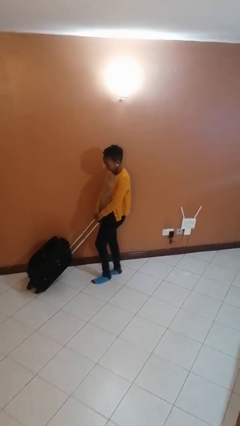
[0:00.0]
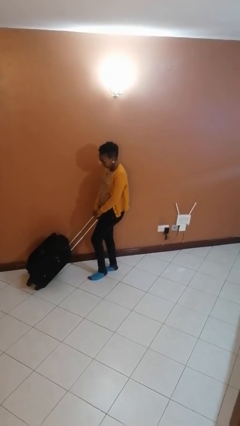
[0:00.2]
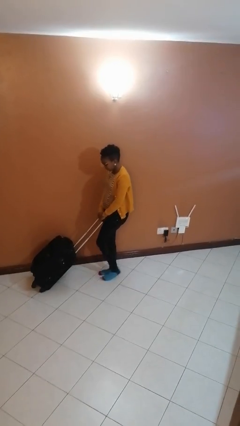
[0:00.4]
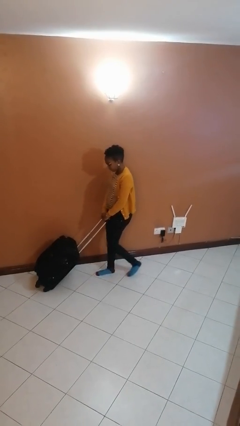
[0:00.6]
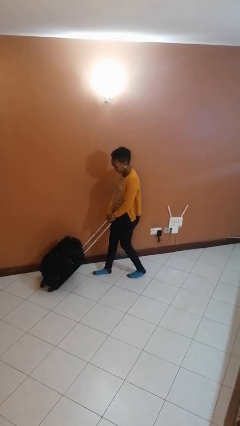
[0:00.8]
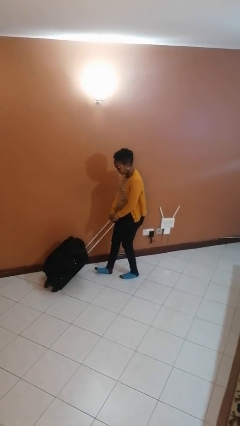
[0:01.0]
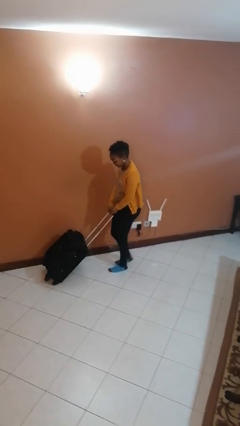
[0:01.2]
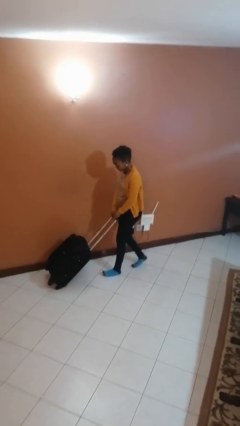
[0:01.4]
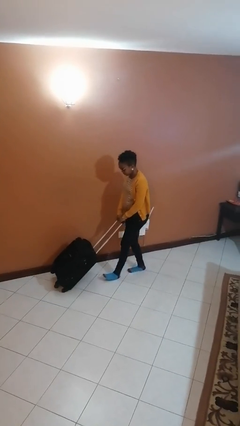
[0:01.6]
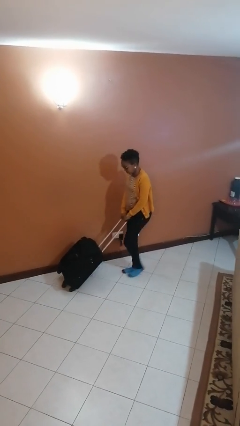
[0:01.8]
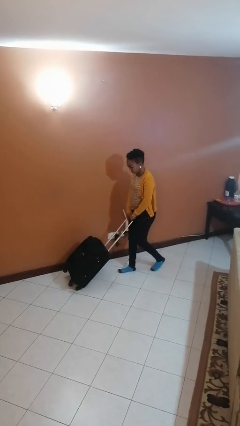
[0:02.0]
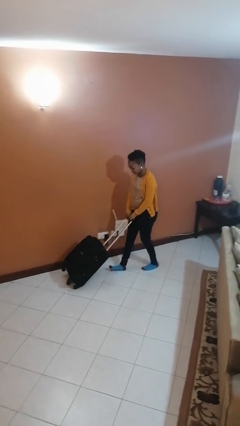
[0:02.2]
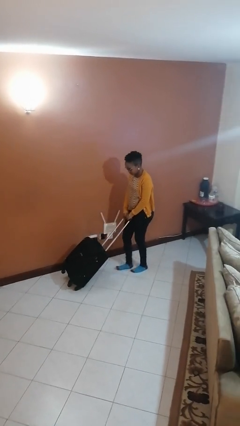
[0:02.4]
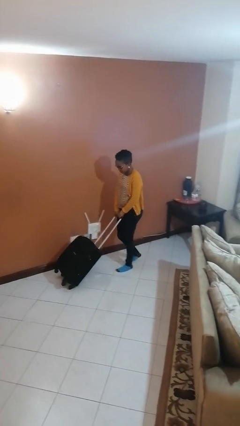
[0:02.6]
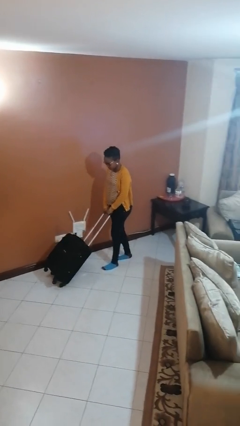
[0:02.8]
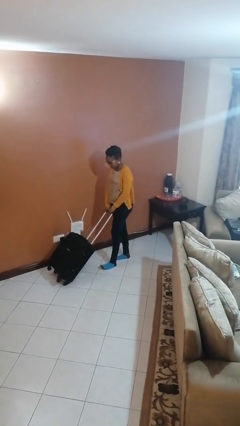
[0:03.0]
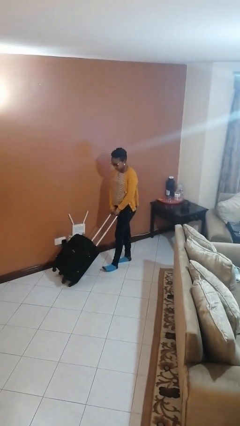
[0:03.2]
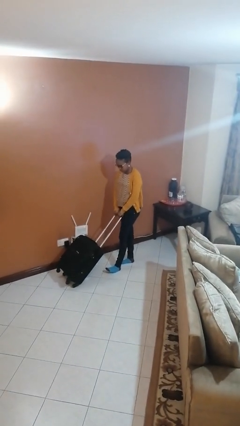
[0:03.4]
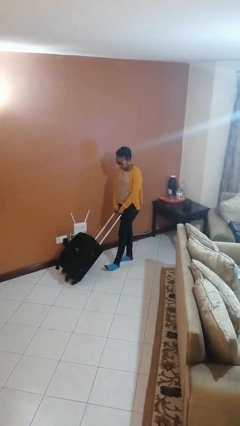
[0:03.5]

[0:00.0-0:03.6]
person pulls wheeled cart

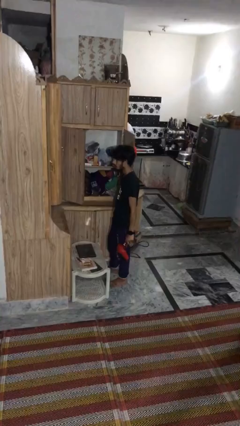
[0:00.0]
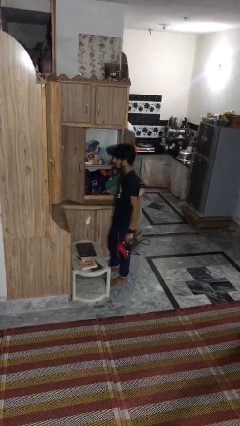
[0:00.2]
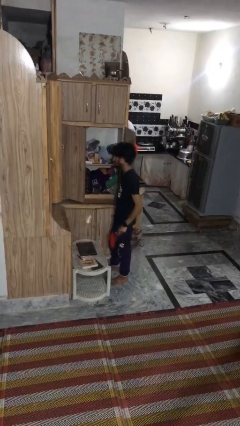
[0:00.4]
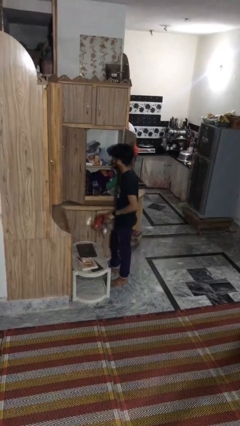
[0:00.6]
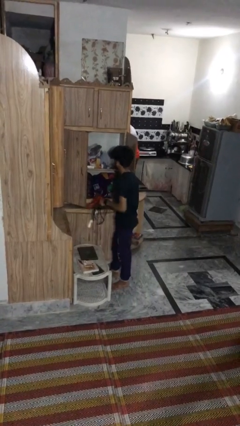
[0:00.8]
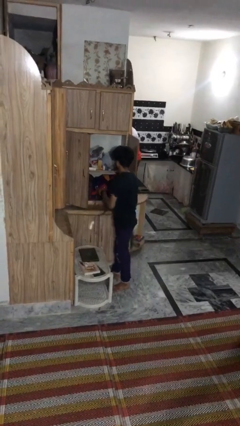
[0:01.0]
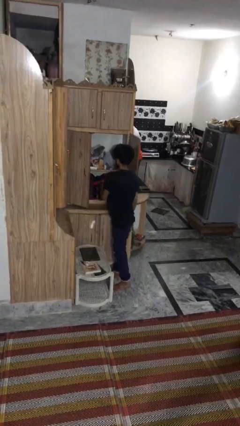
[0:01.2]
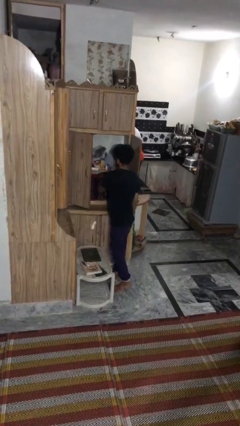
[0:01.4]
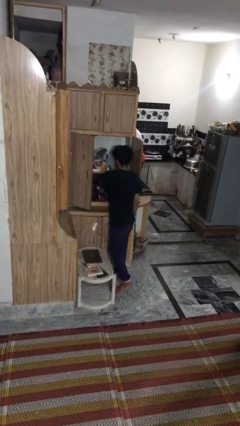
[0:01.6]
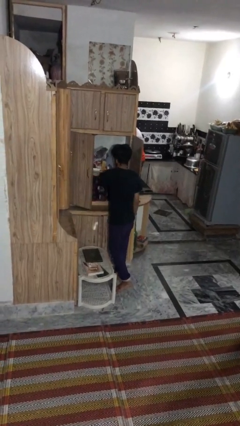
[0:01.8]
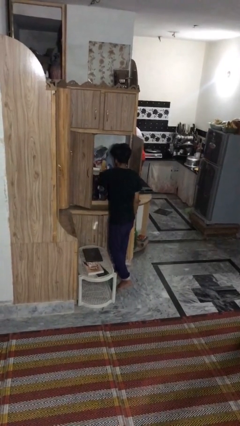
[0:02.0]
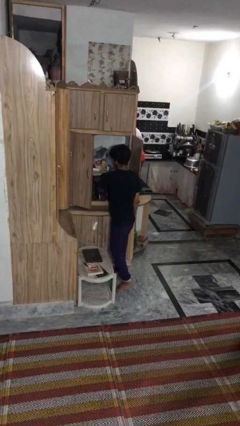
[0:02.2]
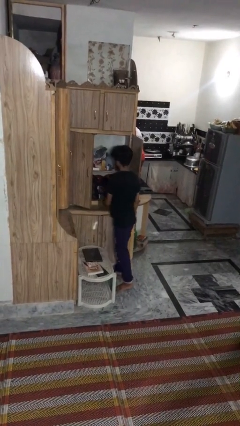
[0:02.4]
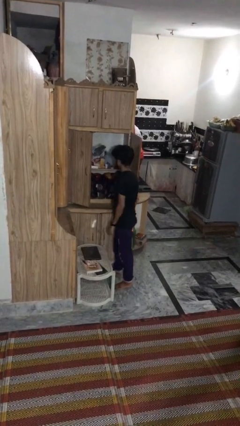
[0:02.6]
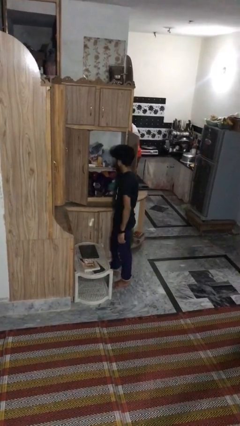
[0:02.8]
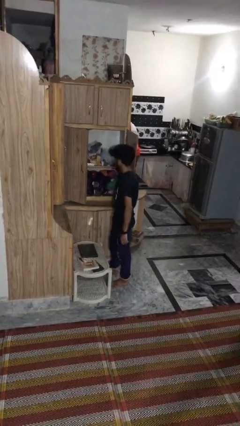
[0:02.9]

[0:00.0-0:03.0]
person puts down object into cabinet

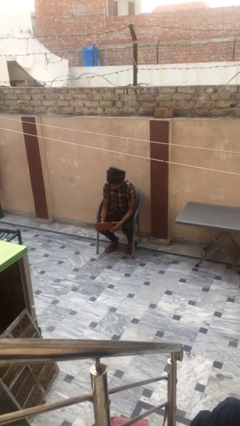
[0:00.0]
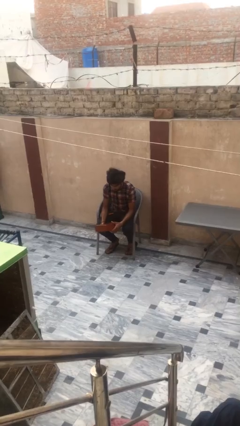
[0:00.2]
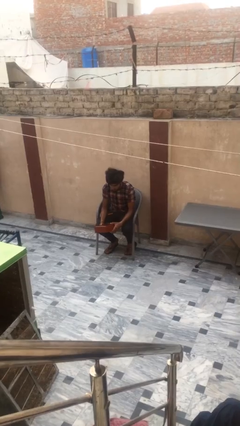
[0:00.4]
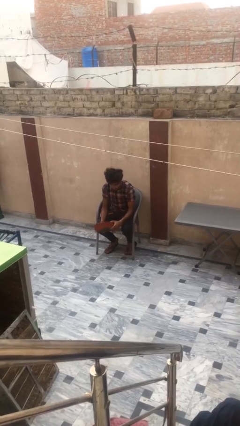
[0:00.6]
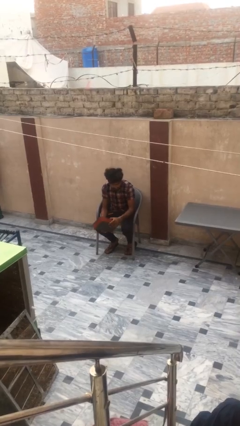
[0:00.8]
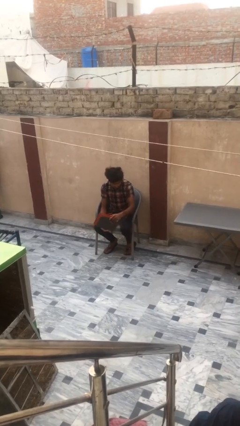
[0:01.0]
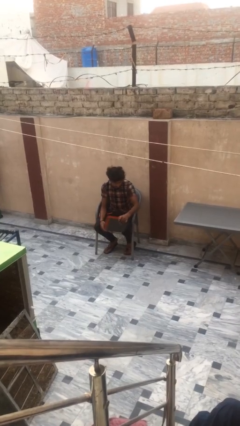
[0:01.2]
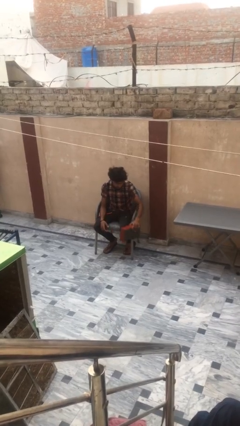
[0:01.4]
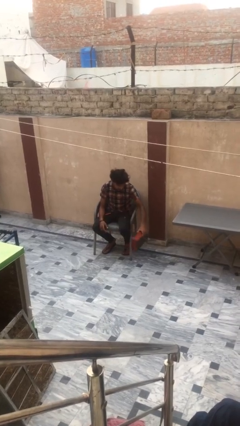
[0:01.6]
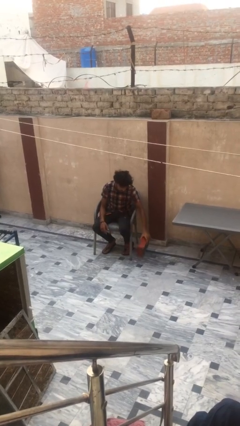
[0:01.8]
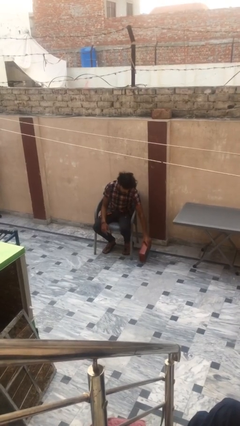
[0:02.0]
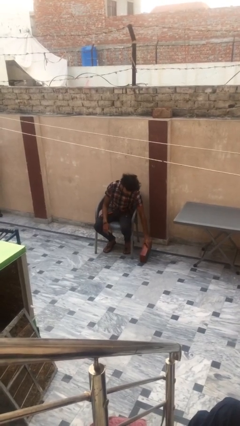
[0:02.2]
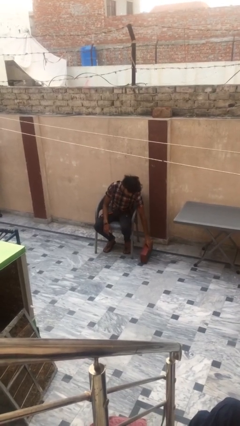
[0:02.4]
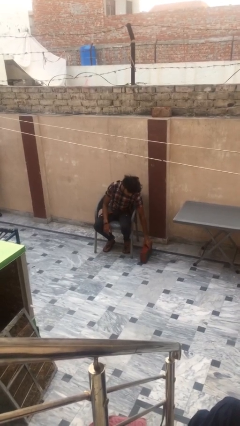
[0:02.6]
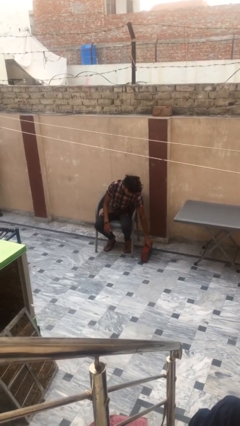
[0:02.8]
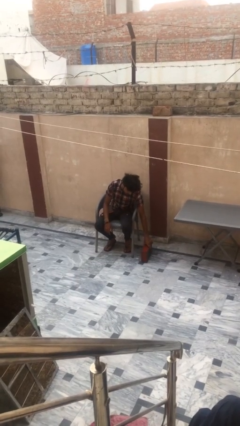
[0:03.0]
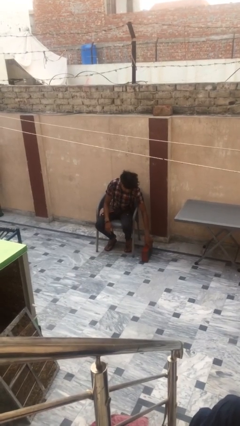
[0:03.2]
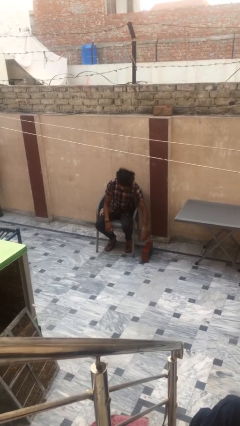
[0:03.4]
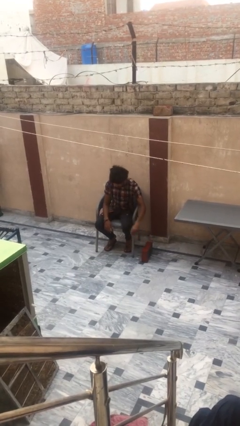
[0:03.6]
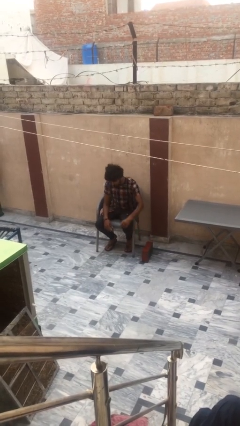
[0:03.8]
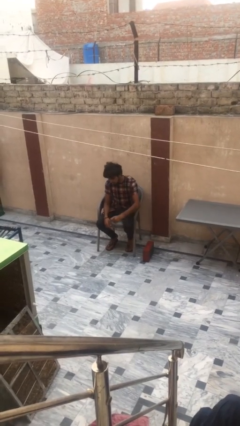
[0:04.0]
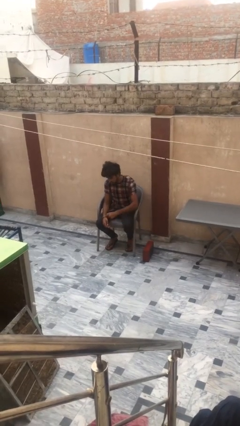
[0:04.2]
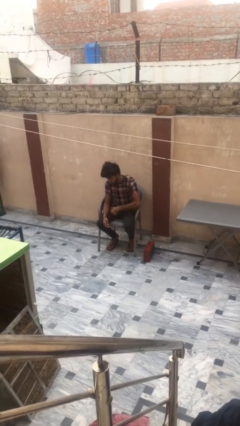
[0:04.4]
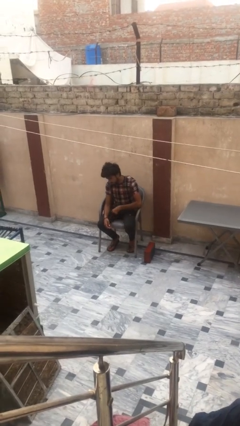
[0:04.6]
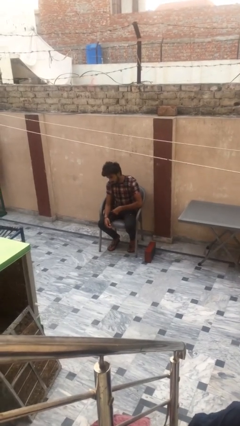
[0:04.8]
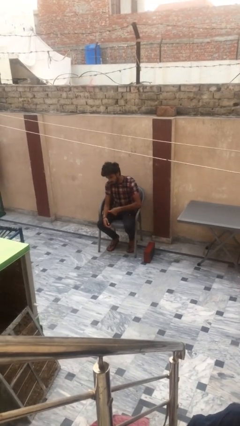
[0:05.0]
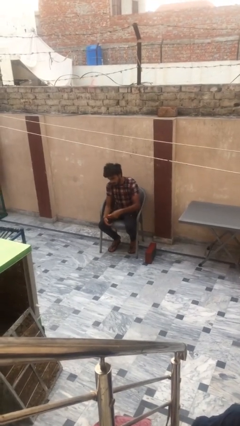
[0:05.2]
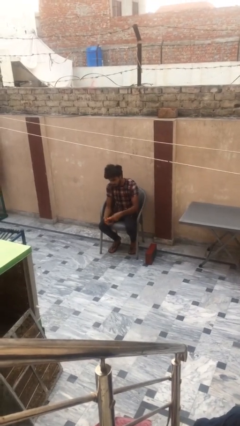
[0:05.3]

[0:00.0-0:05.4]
person puts down object on floor

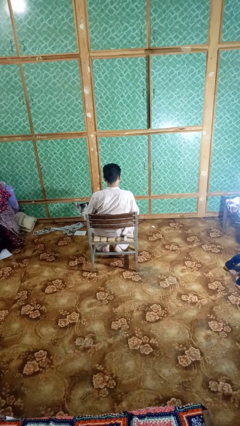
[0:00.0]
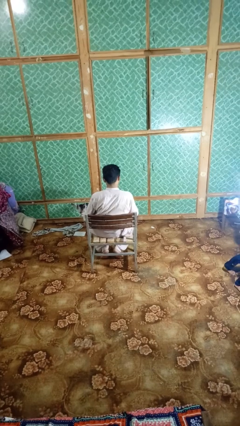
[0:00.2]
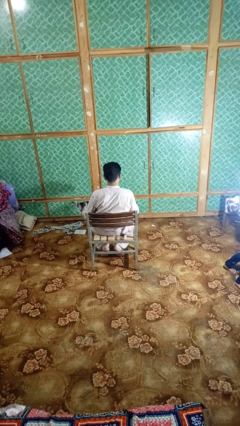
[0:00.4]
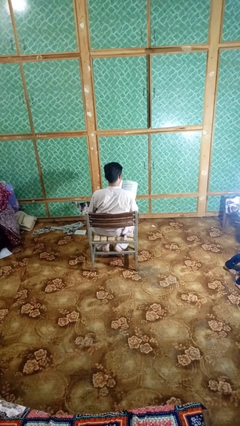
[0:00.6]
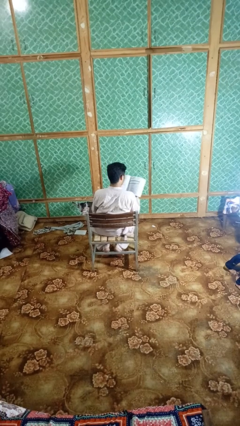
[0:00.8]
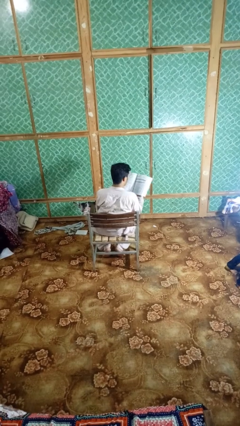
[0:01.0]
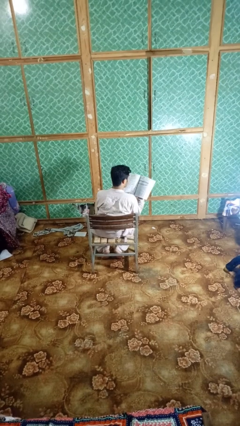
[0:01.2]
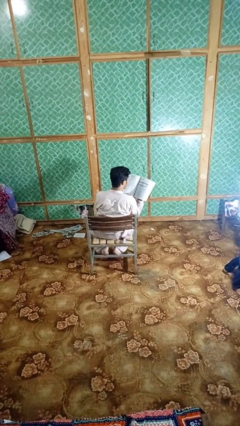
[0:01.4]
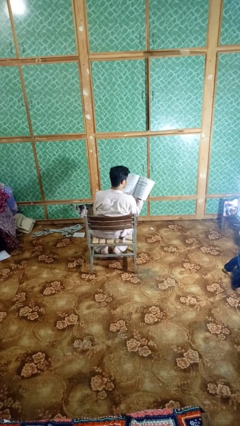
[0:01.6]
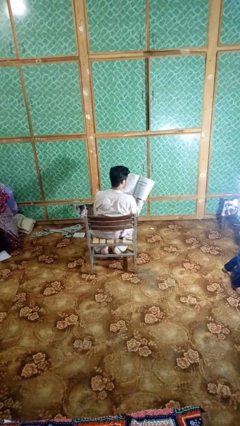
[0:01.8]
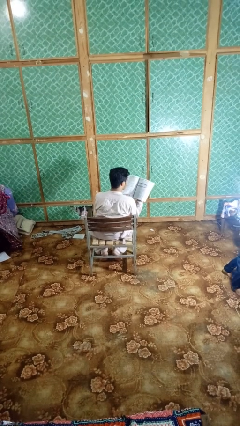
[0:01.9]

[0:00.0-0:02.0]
person reads book

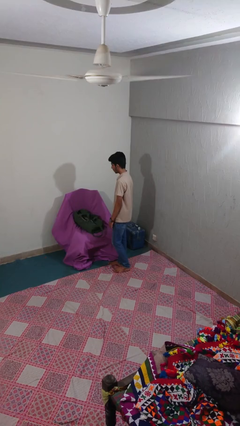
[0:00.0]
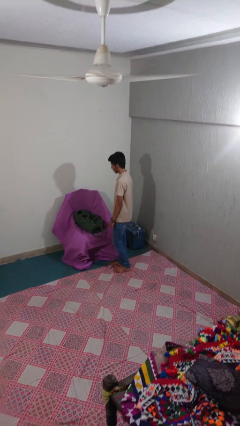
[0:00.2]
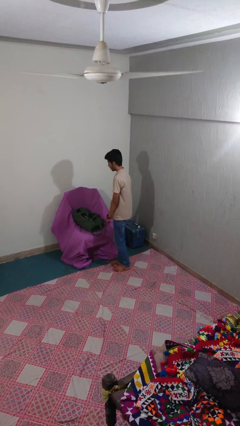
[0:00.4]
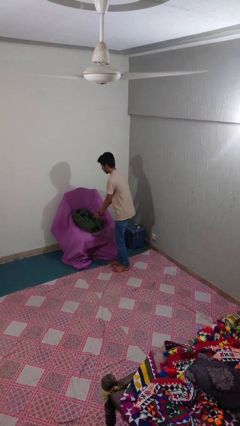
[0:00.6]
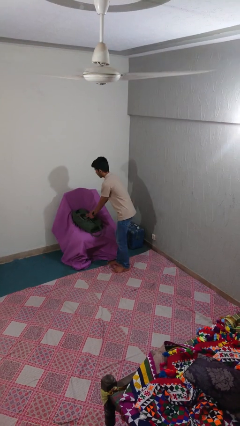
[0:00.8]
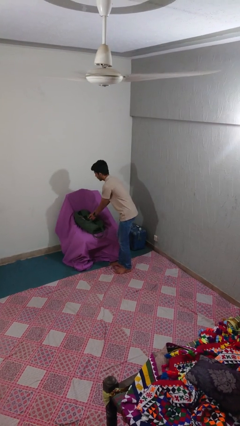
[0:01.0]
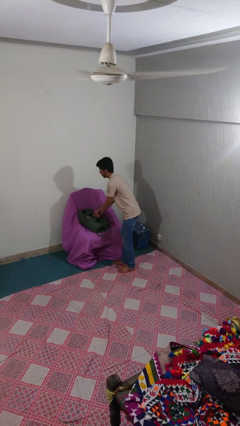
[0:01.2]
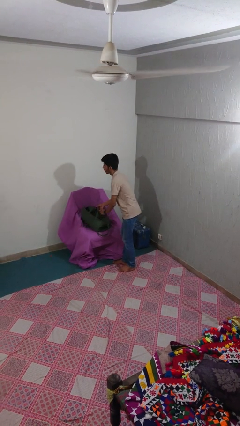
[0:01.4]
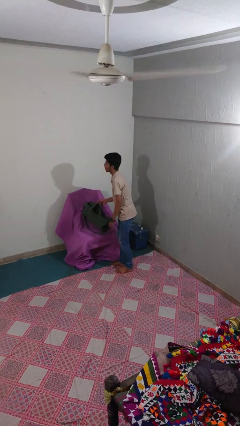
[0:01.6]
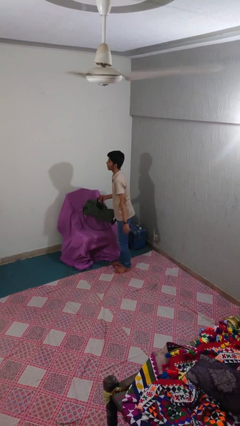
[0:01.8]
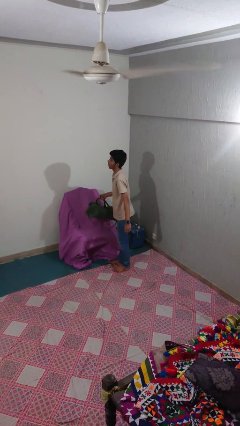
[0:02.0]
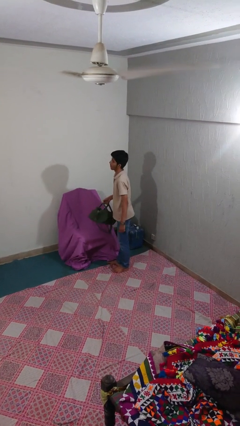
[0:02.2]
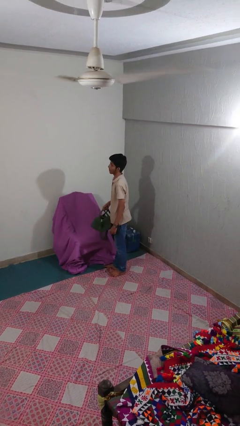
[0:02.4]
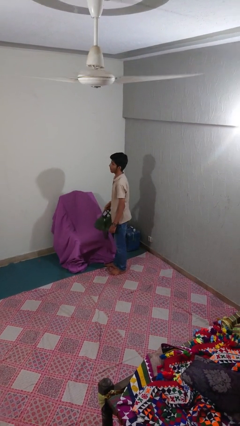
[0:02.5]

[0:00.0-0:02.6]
person picks up object from couch

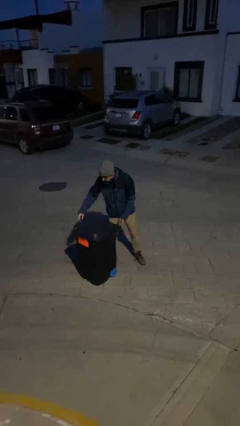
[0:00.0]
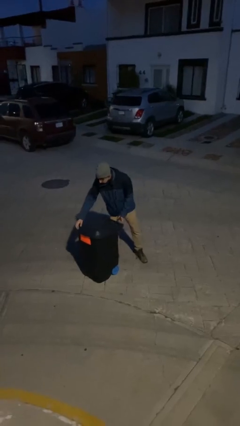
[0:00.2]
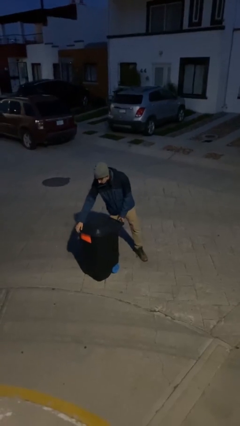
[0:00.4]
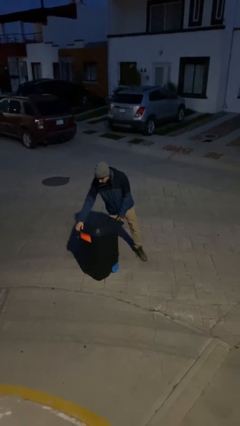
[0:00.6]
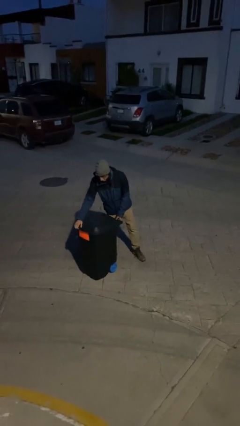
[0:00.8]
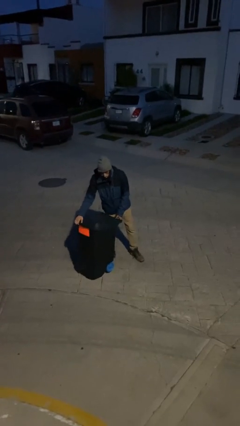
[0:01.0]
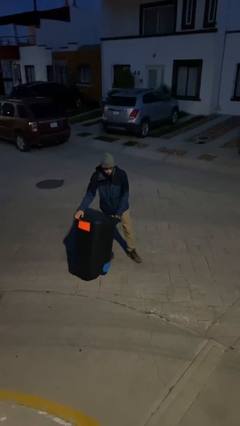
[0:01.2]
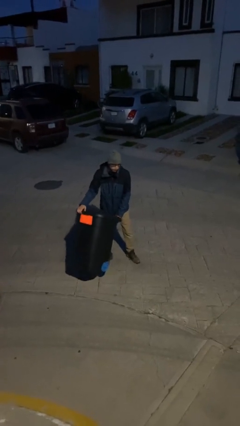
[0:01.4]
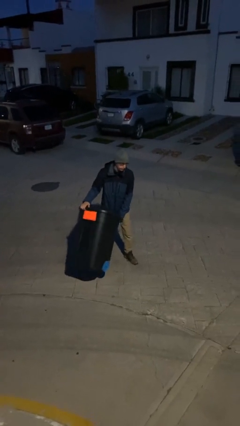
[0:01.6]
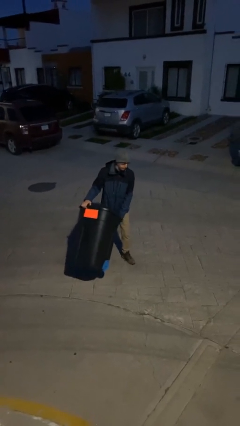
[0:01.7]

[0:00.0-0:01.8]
person picks up object from floor
